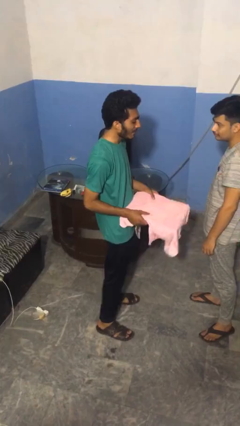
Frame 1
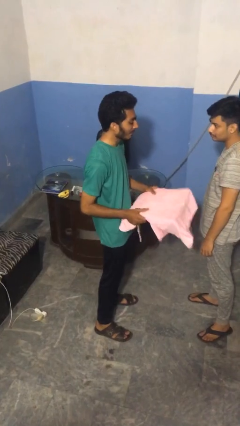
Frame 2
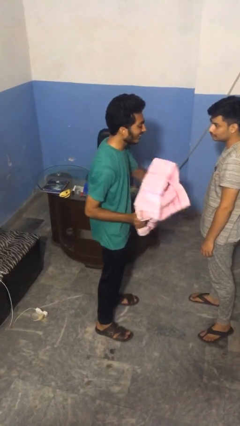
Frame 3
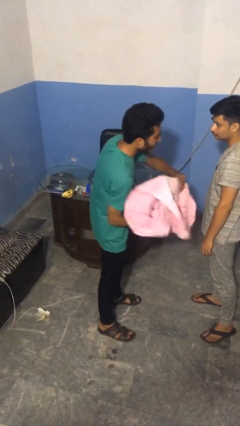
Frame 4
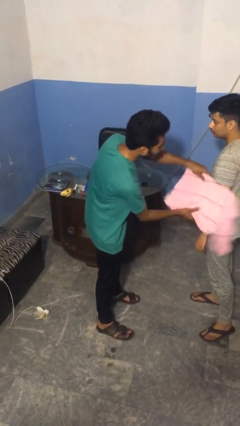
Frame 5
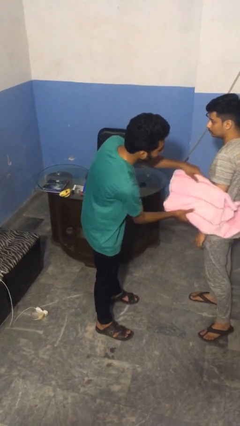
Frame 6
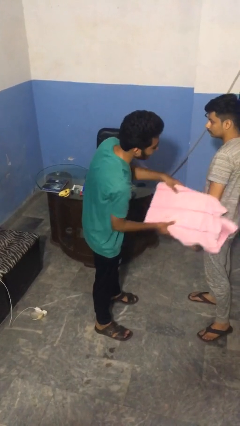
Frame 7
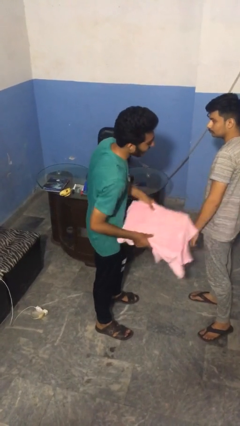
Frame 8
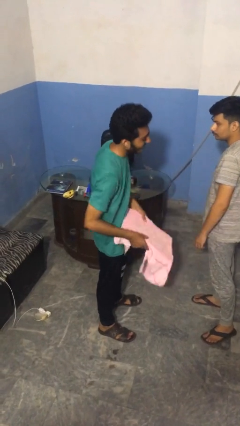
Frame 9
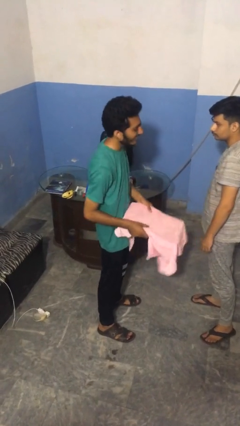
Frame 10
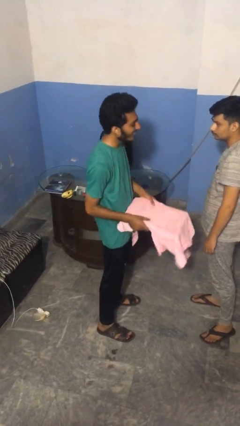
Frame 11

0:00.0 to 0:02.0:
person hits person with pillow

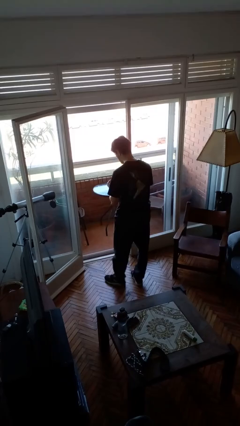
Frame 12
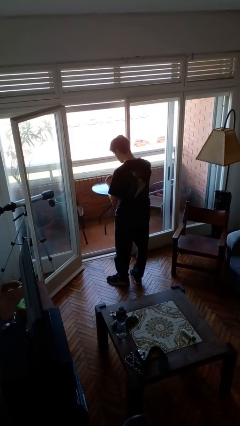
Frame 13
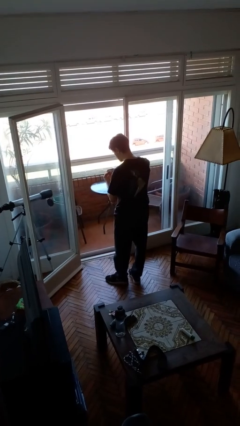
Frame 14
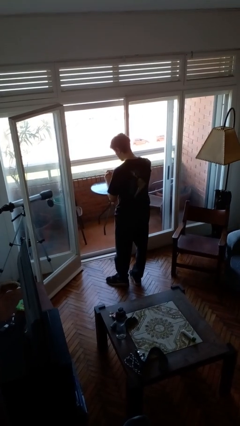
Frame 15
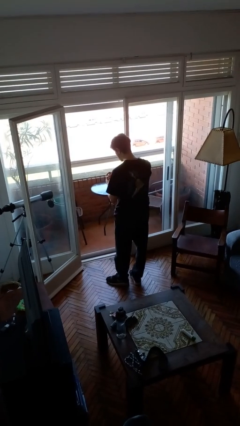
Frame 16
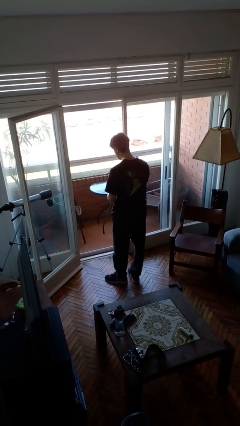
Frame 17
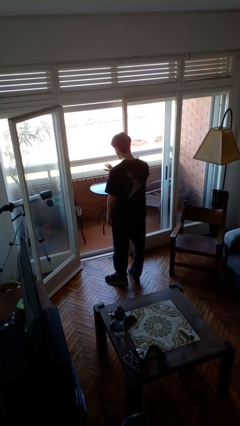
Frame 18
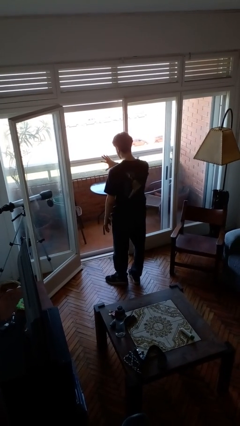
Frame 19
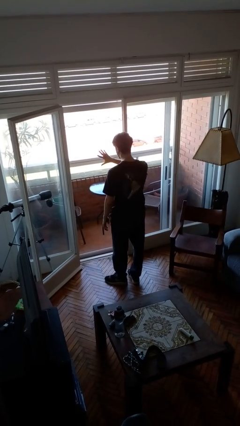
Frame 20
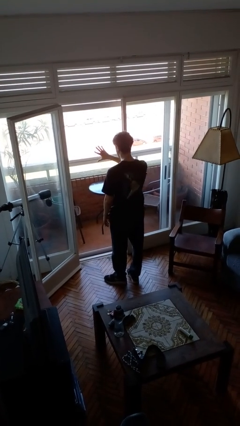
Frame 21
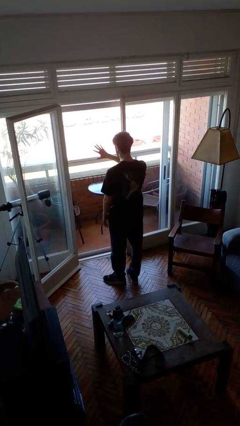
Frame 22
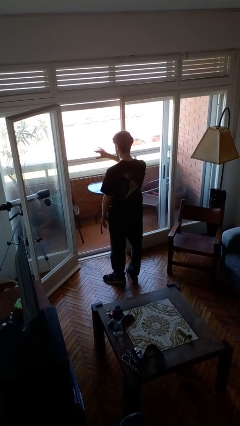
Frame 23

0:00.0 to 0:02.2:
person puts on ring

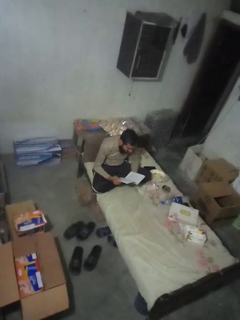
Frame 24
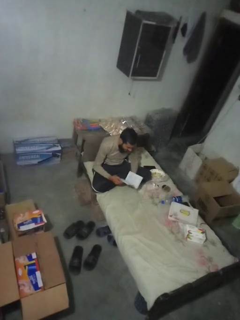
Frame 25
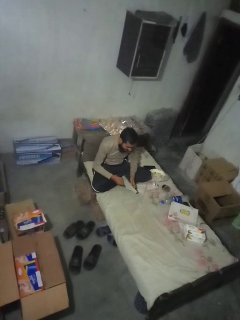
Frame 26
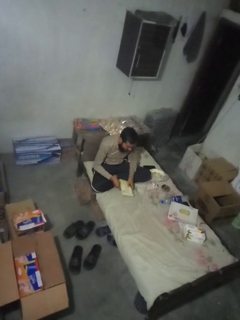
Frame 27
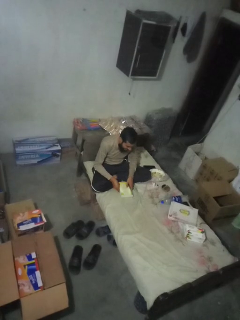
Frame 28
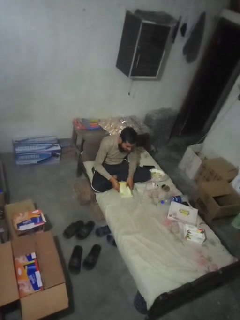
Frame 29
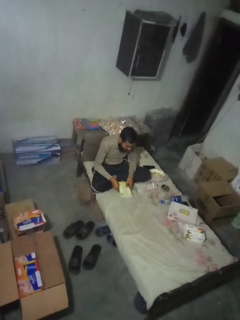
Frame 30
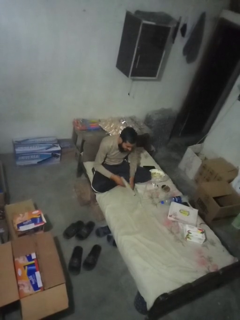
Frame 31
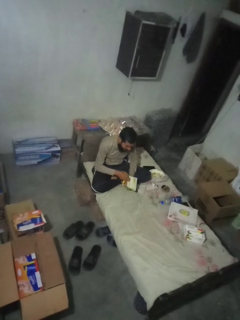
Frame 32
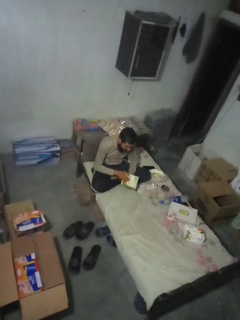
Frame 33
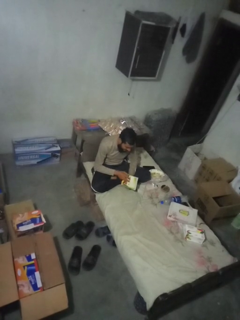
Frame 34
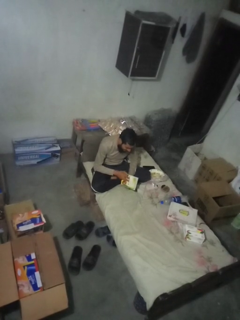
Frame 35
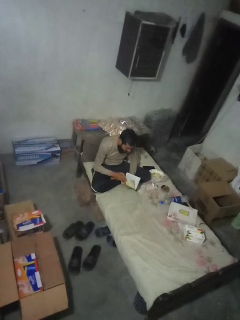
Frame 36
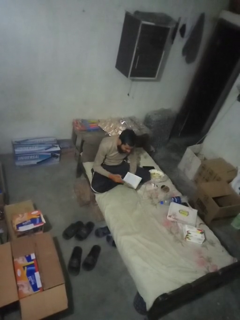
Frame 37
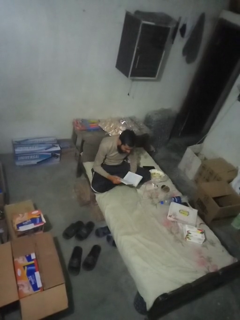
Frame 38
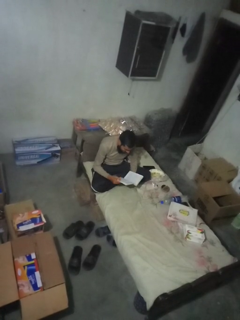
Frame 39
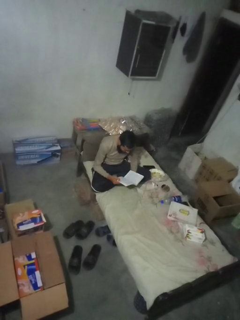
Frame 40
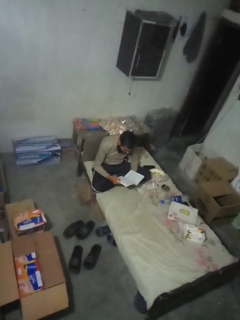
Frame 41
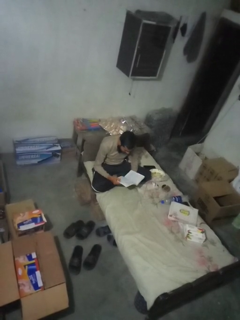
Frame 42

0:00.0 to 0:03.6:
person reads book

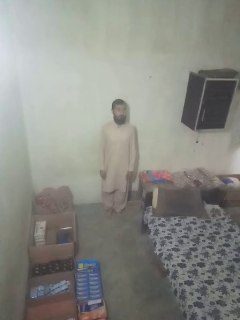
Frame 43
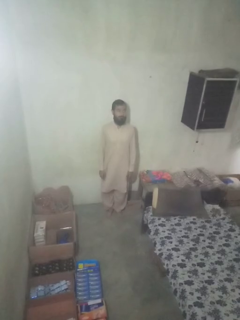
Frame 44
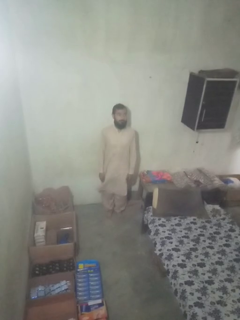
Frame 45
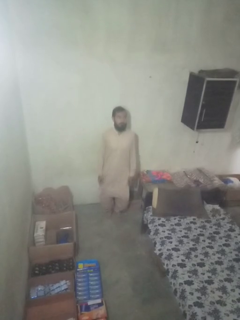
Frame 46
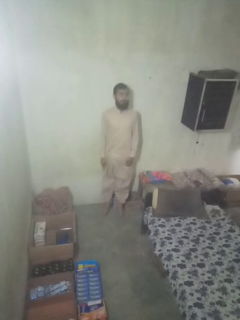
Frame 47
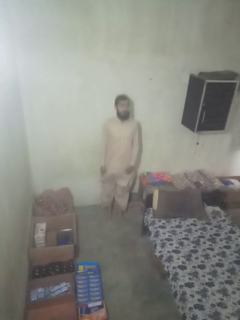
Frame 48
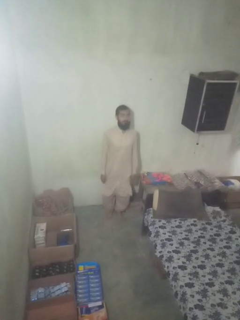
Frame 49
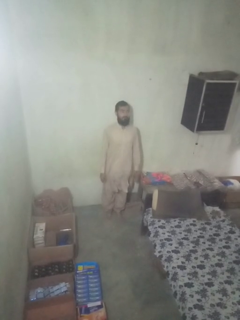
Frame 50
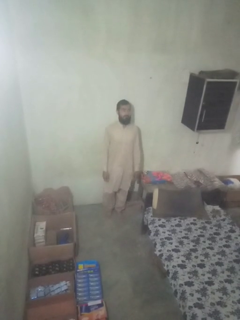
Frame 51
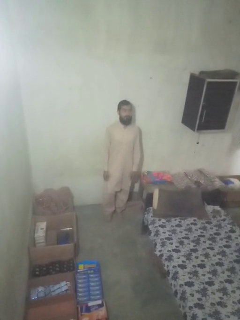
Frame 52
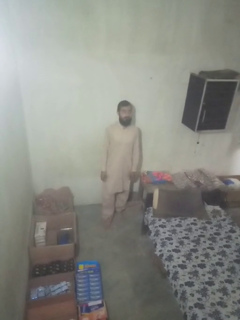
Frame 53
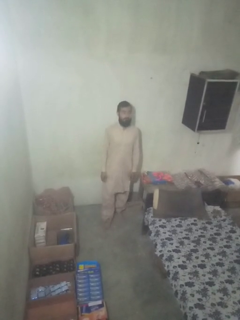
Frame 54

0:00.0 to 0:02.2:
person jumps

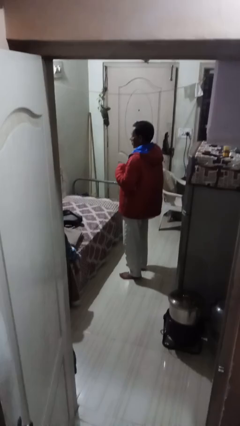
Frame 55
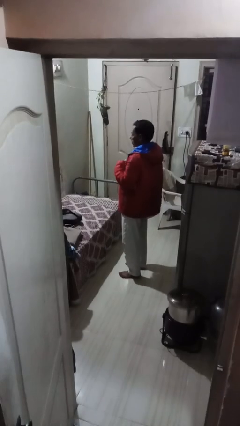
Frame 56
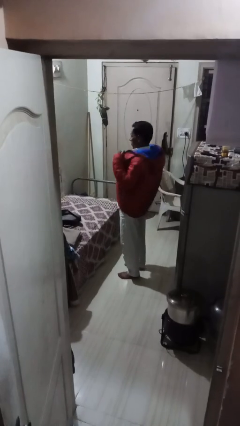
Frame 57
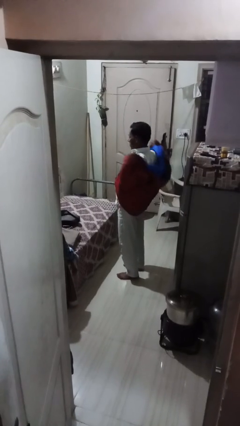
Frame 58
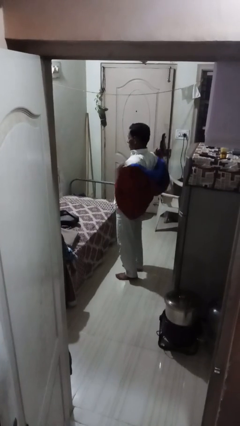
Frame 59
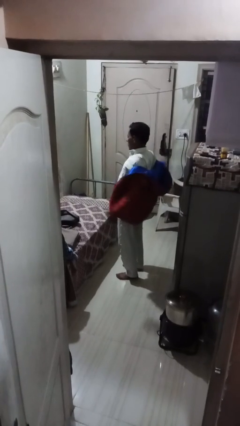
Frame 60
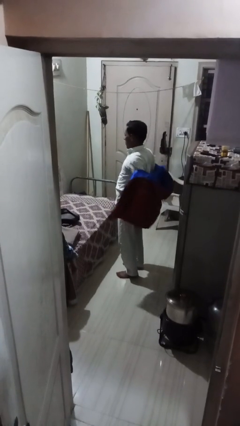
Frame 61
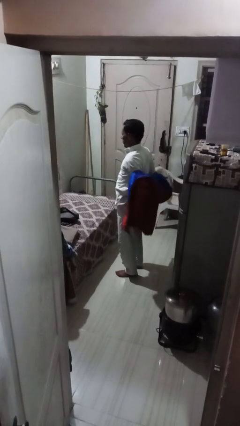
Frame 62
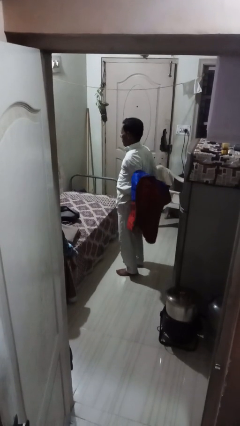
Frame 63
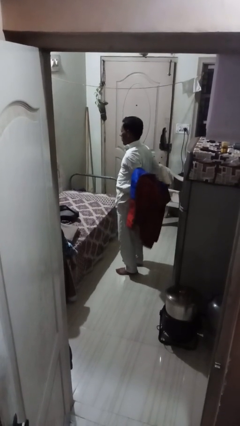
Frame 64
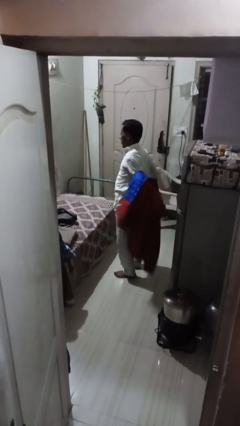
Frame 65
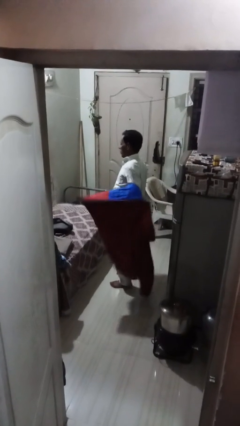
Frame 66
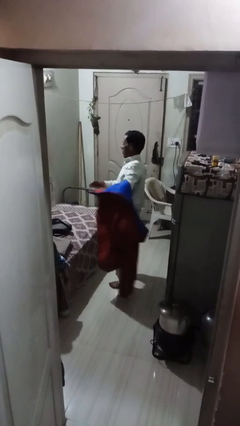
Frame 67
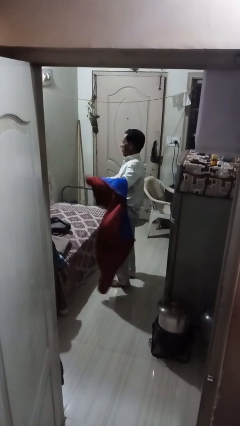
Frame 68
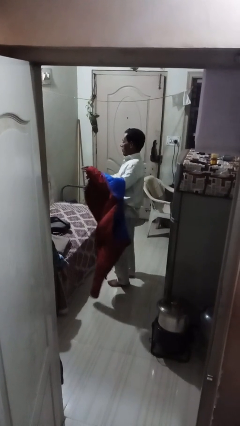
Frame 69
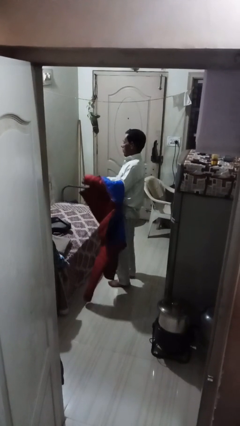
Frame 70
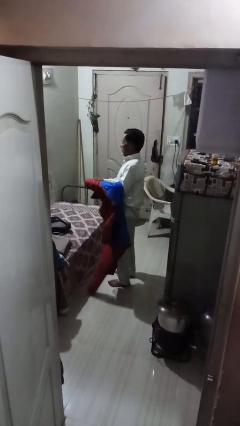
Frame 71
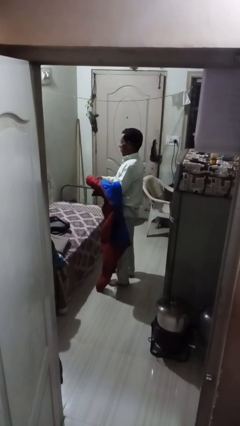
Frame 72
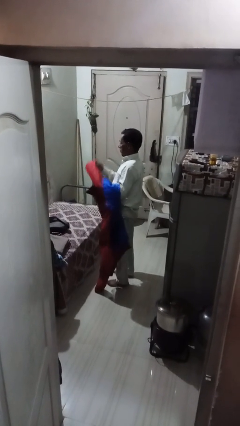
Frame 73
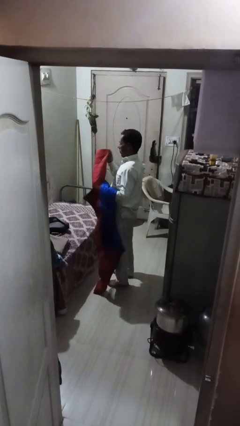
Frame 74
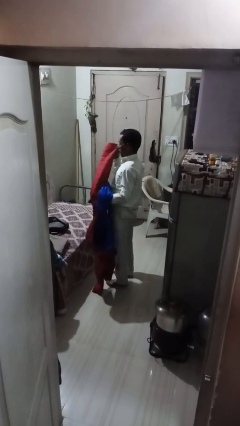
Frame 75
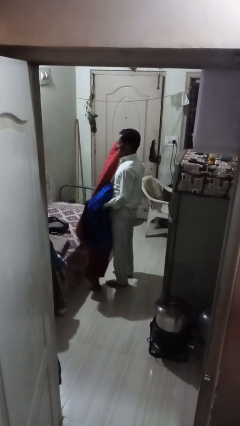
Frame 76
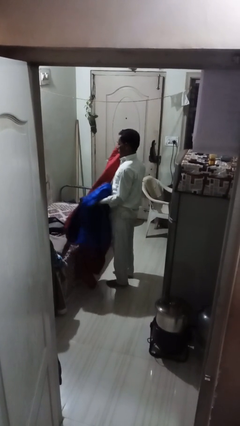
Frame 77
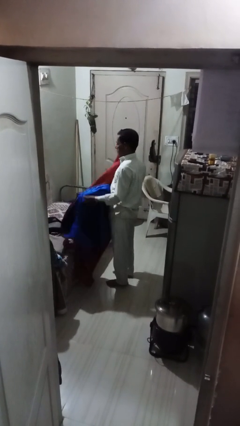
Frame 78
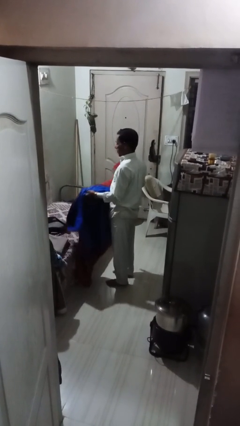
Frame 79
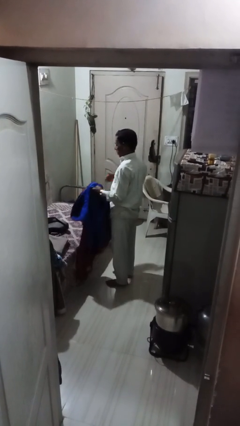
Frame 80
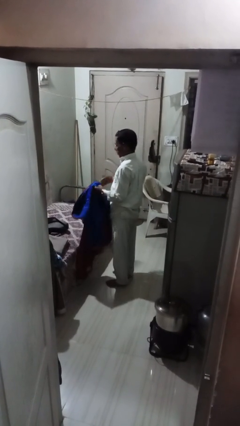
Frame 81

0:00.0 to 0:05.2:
person takes off jacket

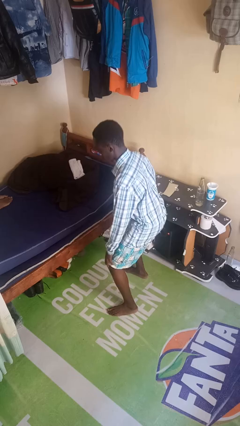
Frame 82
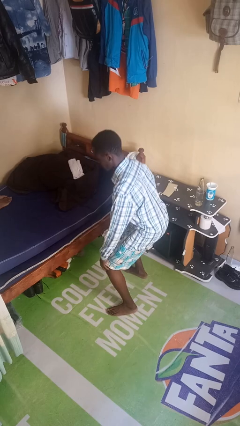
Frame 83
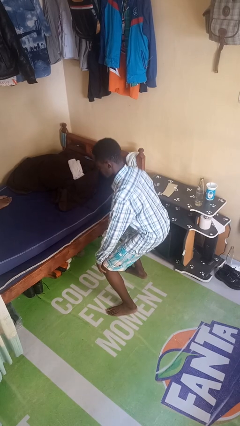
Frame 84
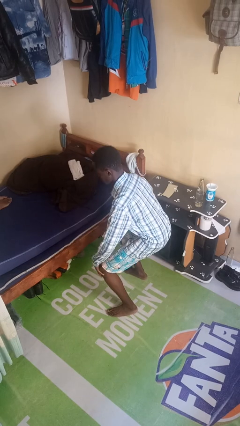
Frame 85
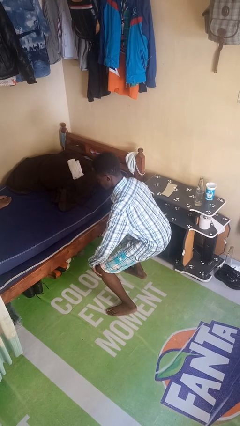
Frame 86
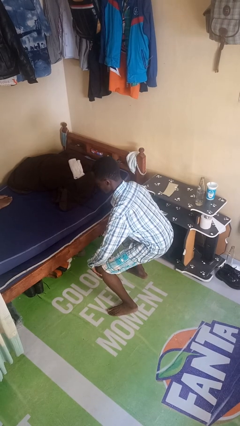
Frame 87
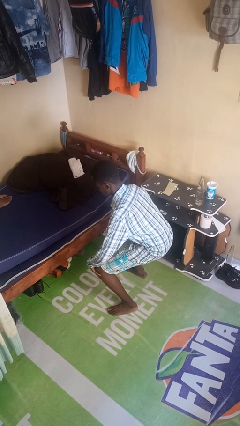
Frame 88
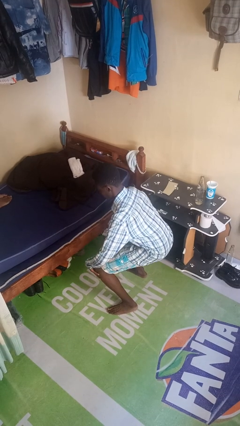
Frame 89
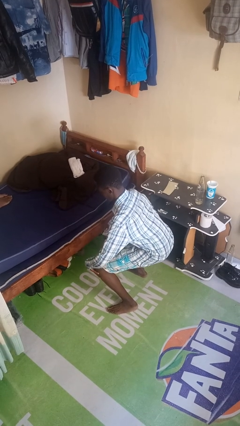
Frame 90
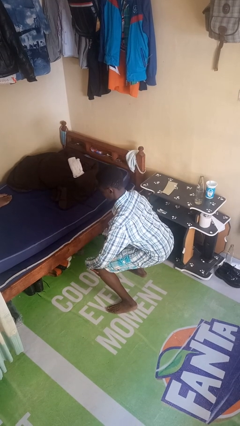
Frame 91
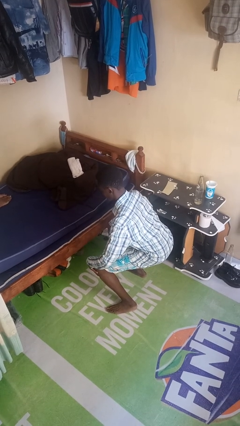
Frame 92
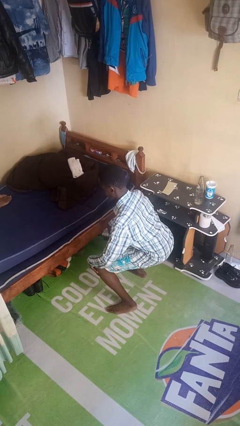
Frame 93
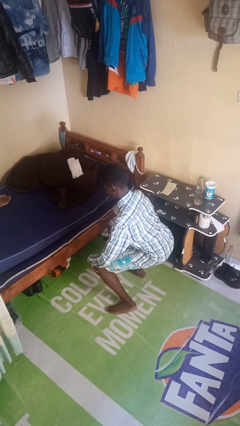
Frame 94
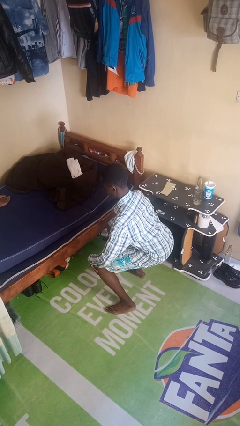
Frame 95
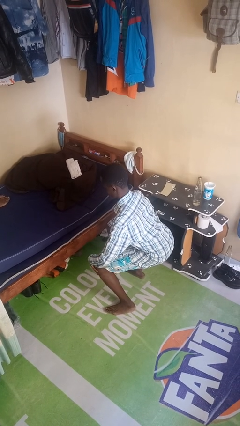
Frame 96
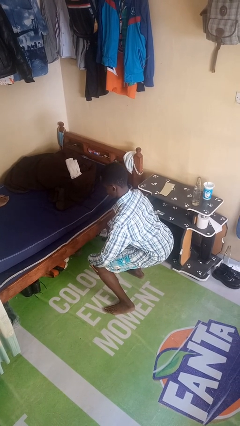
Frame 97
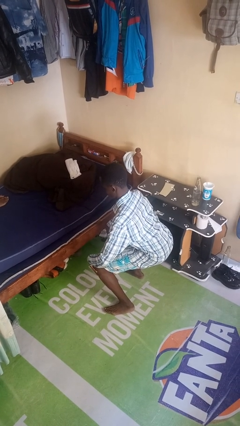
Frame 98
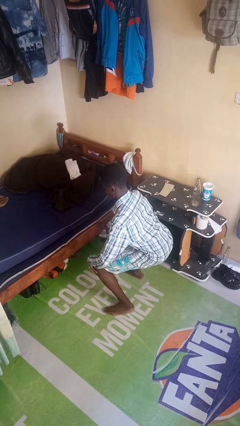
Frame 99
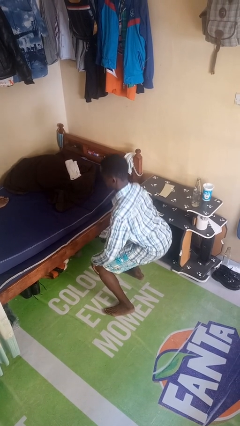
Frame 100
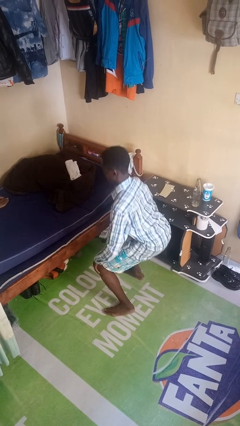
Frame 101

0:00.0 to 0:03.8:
person squats
